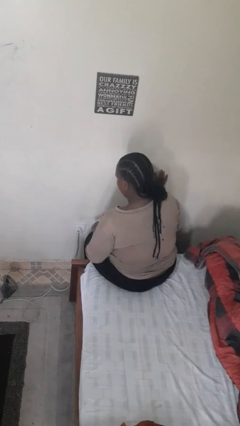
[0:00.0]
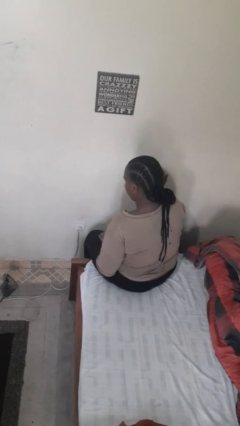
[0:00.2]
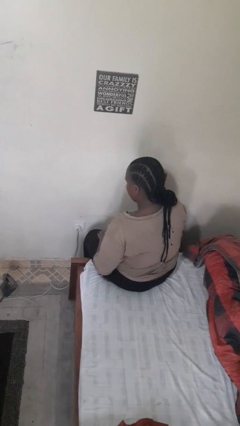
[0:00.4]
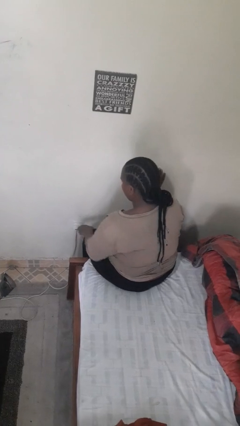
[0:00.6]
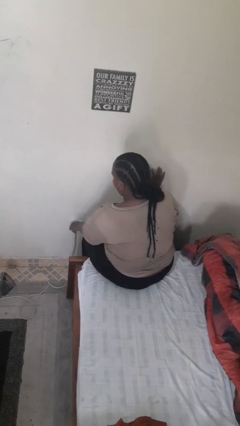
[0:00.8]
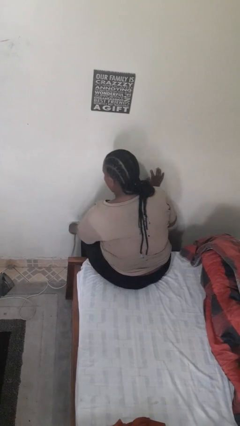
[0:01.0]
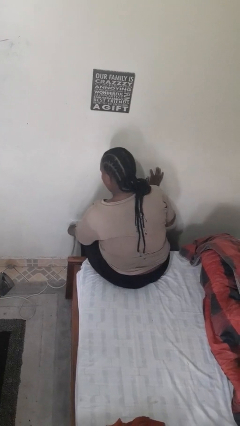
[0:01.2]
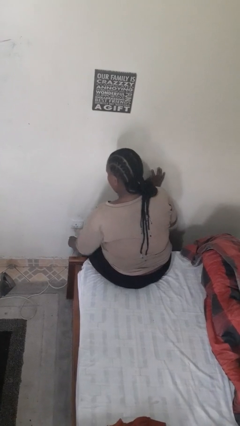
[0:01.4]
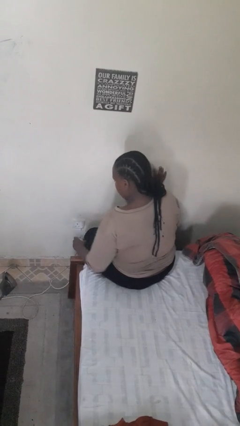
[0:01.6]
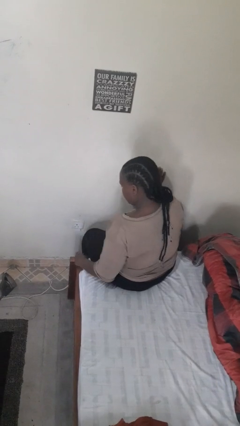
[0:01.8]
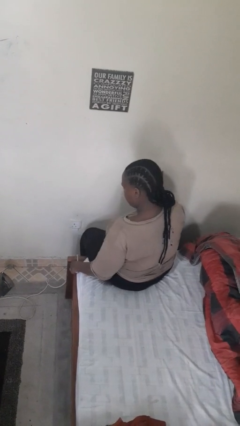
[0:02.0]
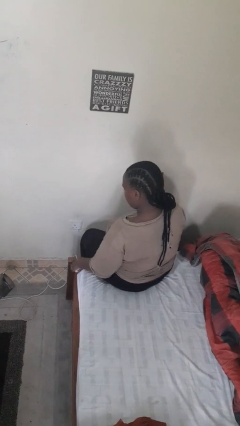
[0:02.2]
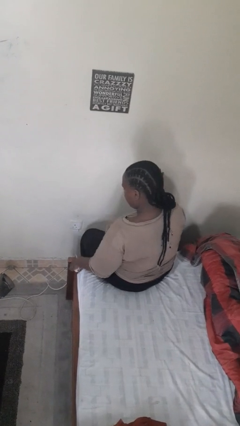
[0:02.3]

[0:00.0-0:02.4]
person unplugs from electrical socket

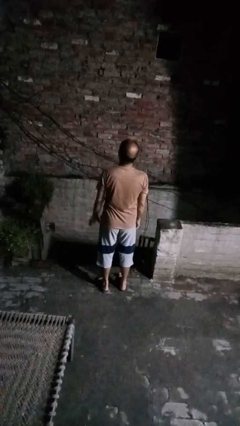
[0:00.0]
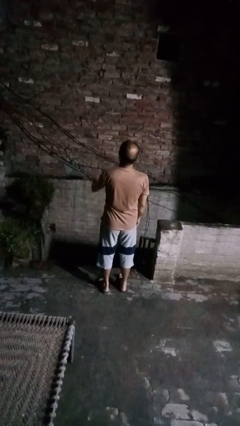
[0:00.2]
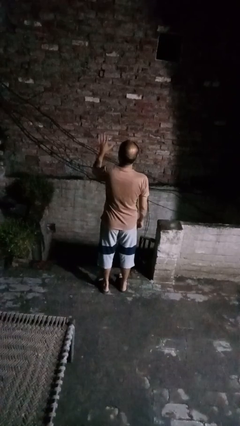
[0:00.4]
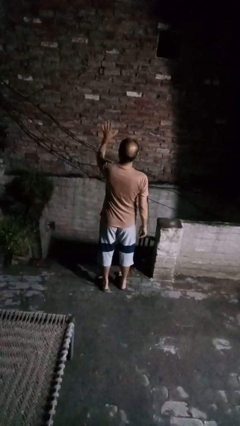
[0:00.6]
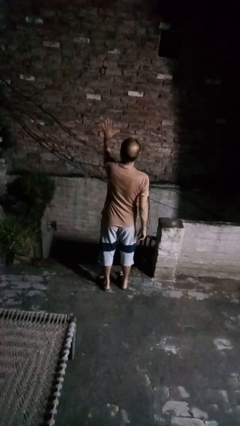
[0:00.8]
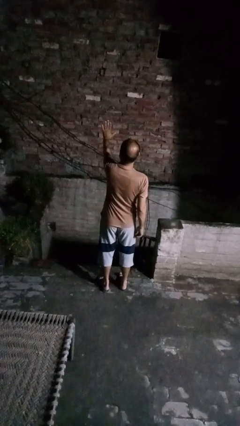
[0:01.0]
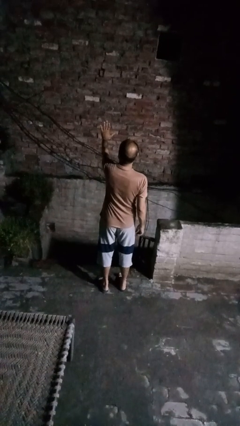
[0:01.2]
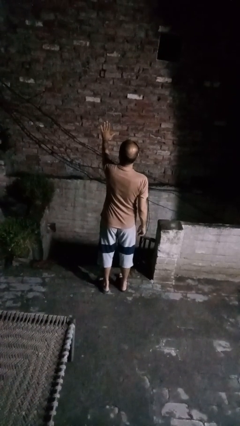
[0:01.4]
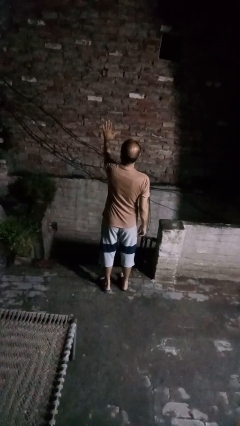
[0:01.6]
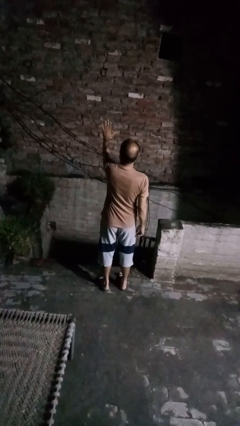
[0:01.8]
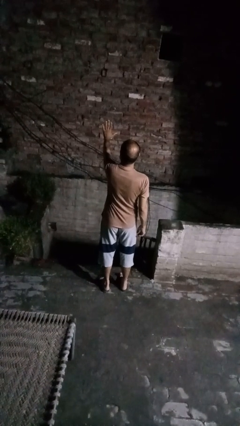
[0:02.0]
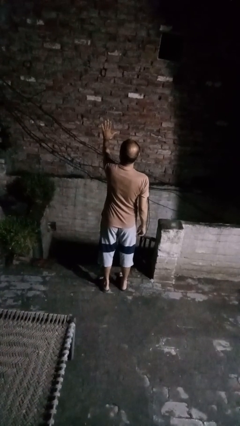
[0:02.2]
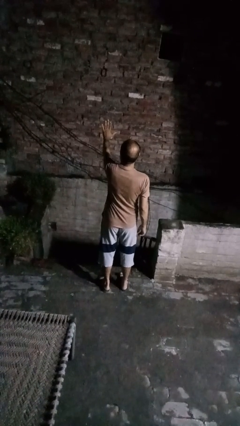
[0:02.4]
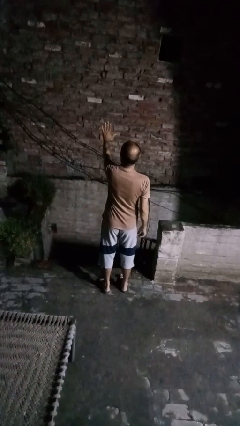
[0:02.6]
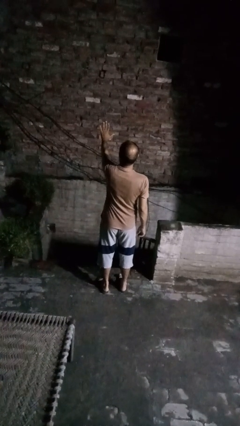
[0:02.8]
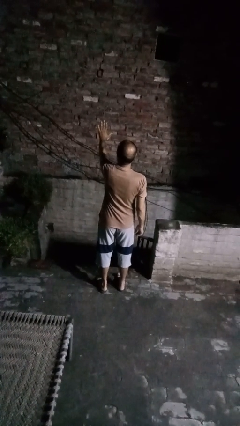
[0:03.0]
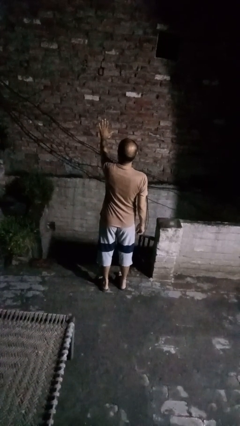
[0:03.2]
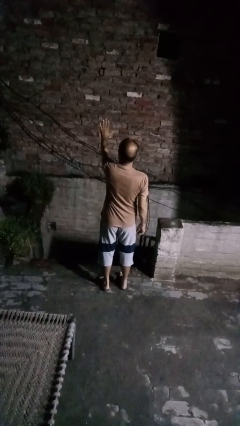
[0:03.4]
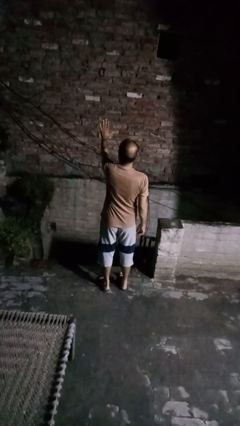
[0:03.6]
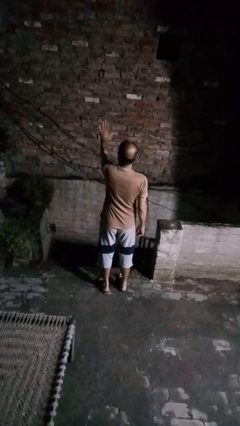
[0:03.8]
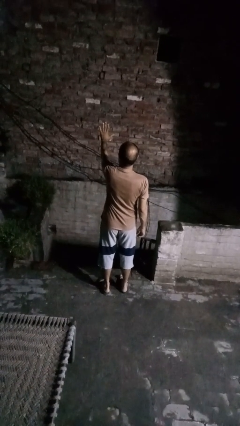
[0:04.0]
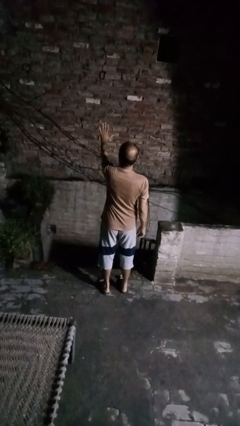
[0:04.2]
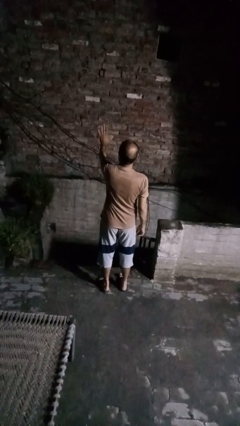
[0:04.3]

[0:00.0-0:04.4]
person gestures stop

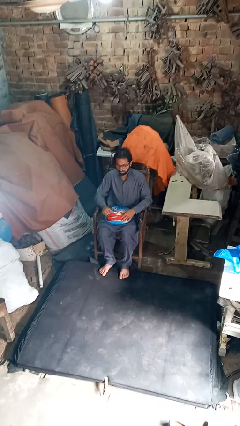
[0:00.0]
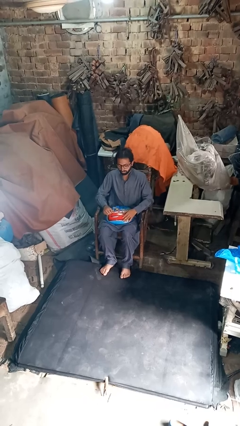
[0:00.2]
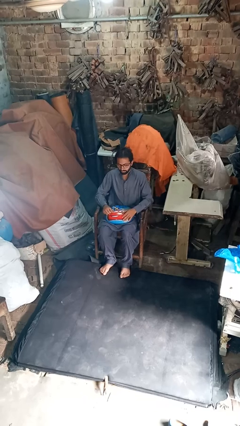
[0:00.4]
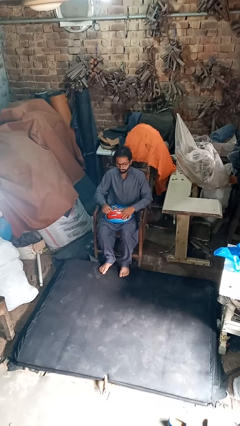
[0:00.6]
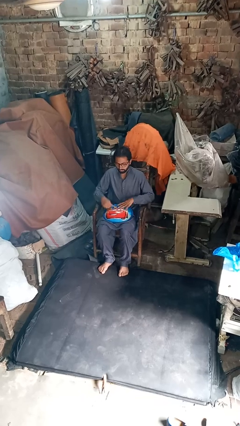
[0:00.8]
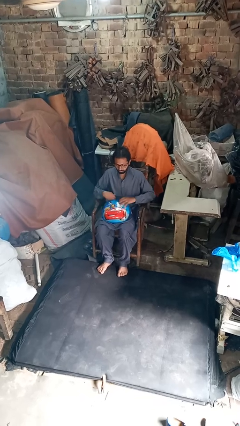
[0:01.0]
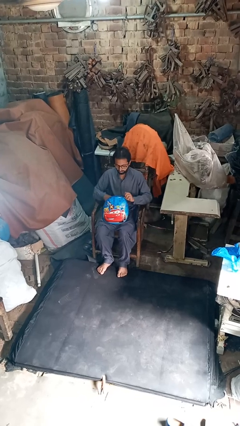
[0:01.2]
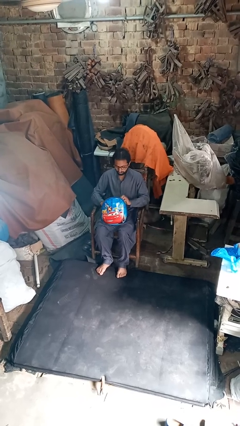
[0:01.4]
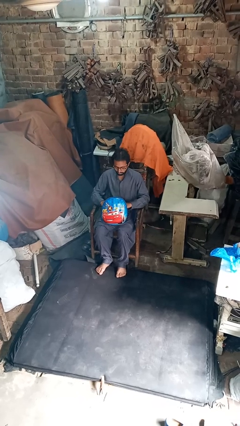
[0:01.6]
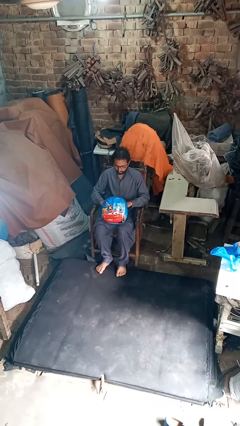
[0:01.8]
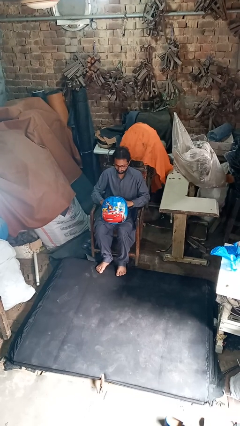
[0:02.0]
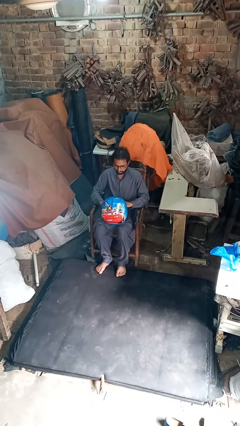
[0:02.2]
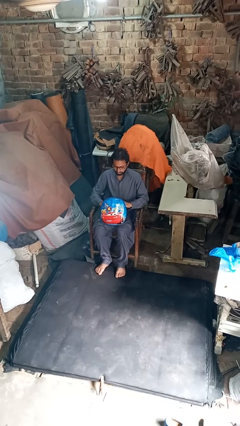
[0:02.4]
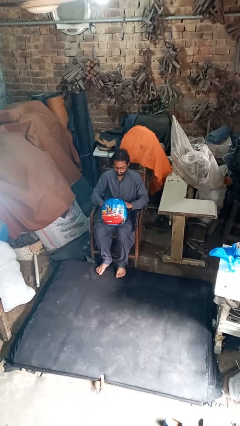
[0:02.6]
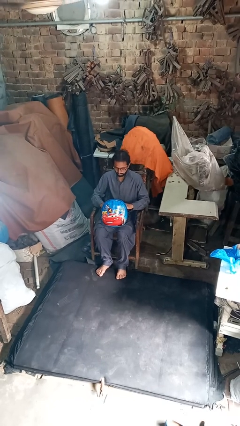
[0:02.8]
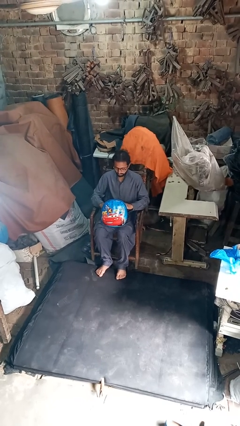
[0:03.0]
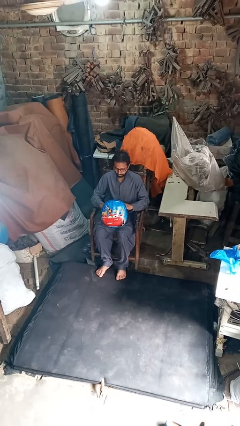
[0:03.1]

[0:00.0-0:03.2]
person searches in purse

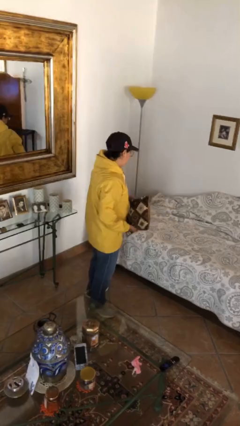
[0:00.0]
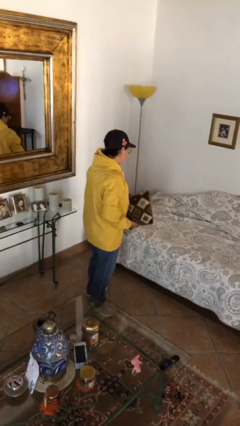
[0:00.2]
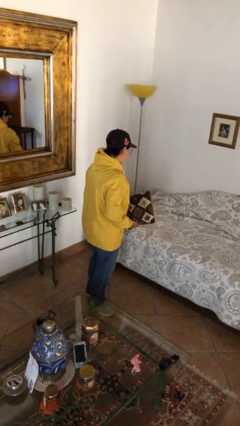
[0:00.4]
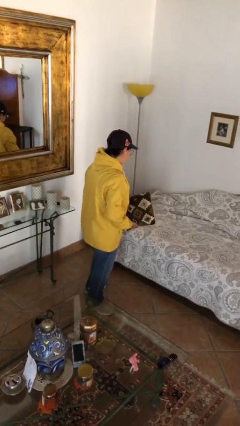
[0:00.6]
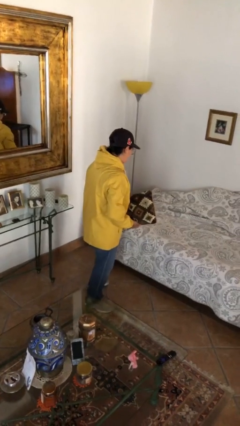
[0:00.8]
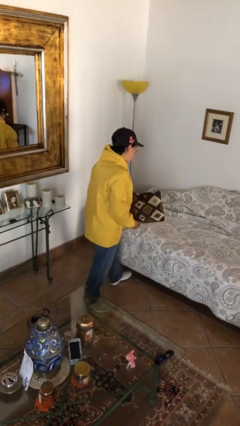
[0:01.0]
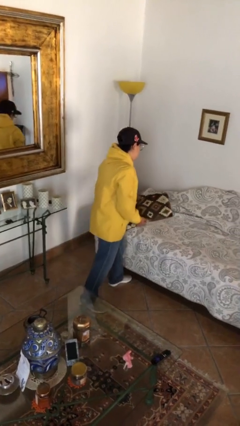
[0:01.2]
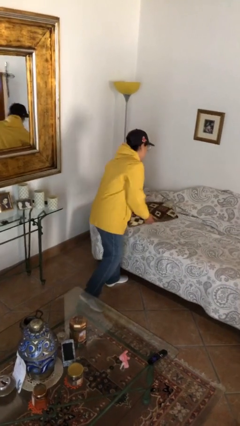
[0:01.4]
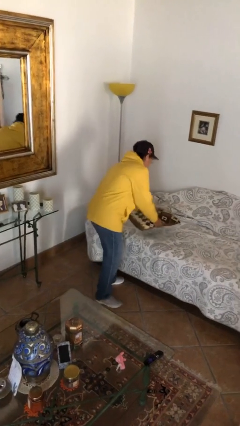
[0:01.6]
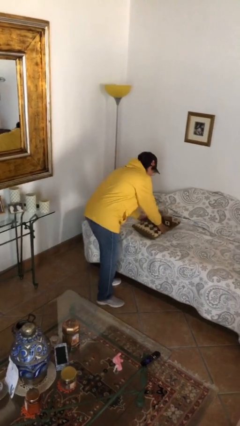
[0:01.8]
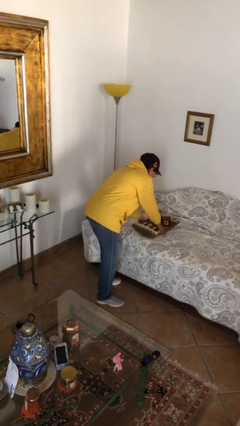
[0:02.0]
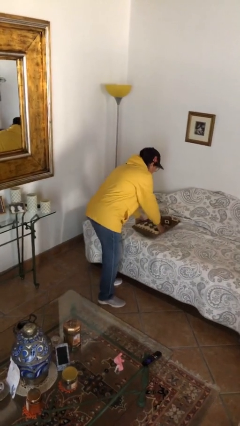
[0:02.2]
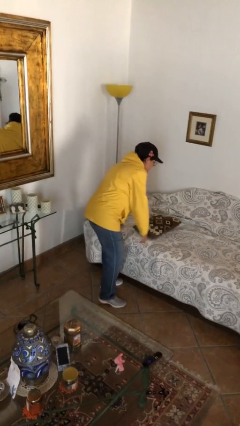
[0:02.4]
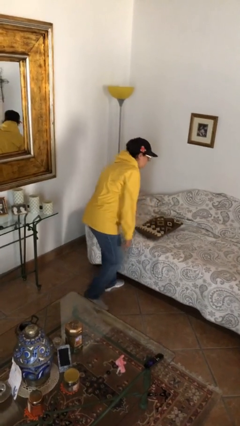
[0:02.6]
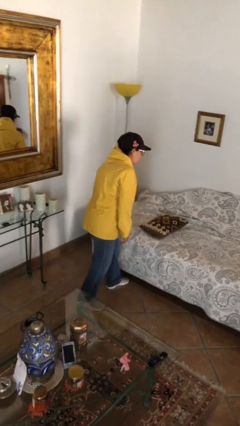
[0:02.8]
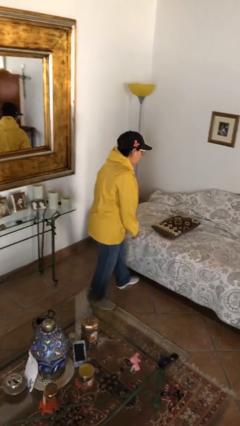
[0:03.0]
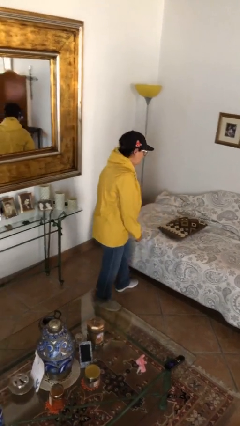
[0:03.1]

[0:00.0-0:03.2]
person puts down object on bed

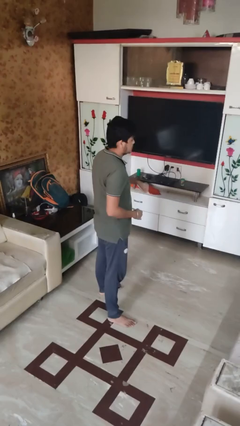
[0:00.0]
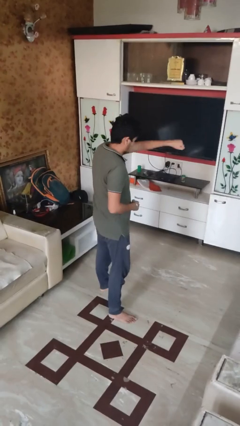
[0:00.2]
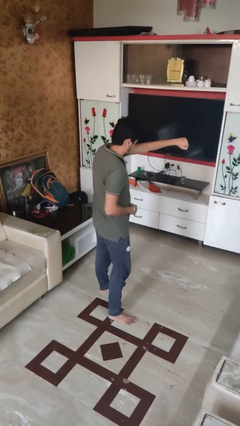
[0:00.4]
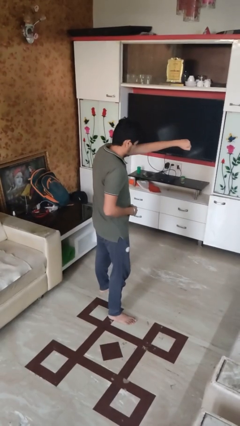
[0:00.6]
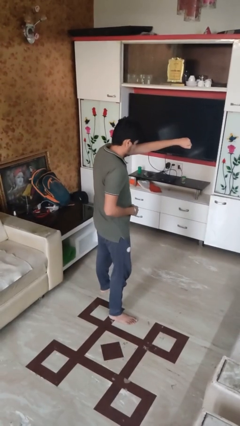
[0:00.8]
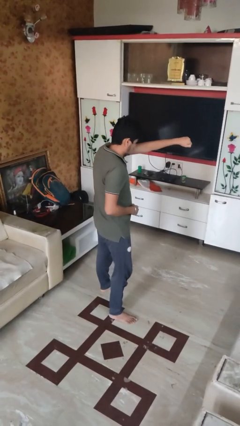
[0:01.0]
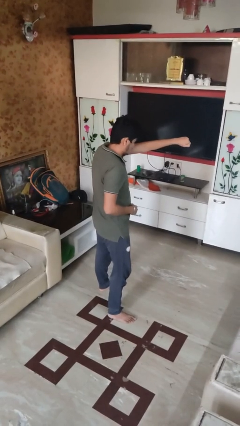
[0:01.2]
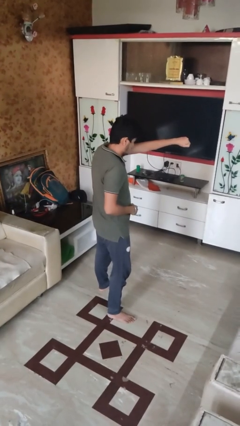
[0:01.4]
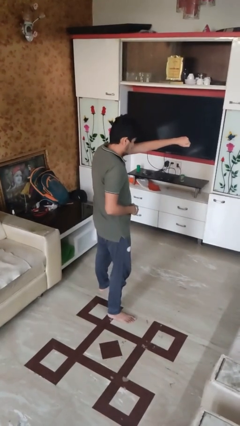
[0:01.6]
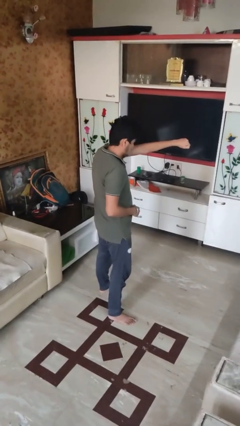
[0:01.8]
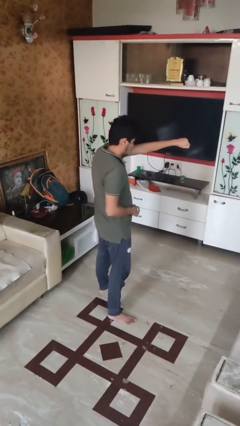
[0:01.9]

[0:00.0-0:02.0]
person punches

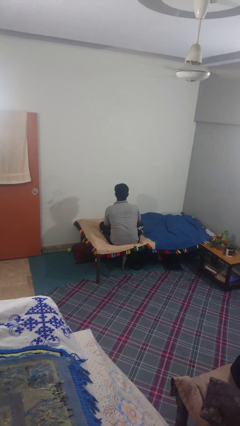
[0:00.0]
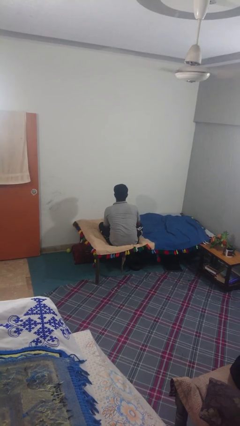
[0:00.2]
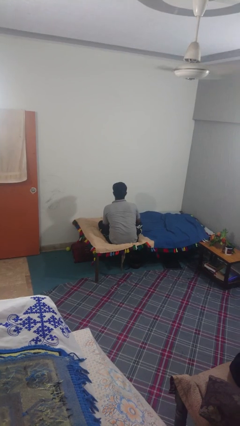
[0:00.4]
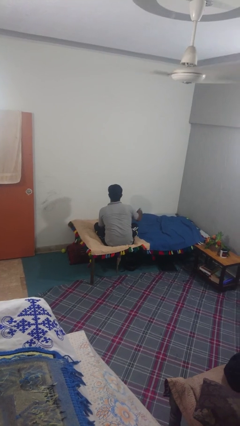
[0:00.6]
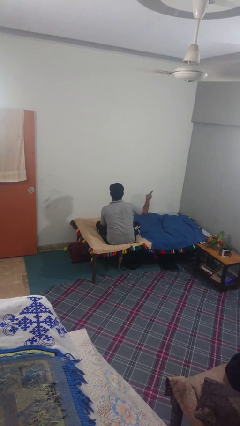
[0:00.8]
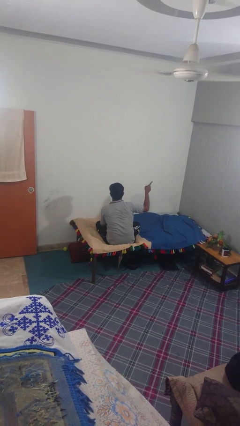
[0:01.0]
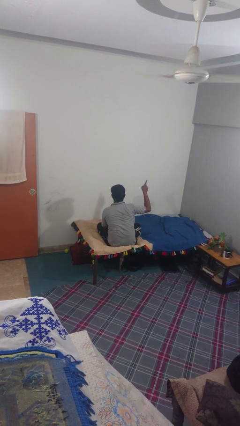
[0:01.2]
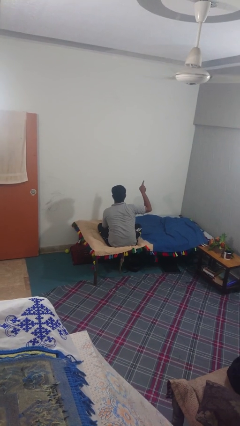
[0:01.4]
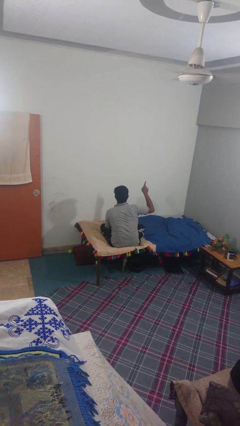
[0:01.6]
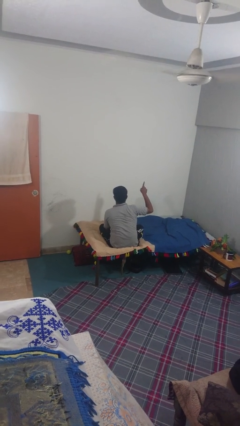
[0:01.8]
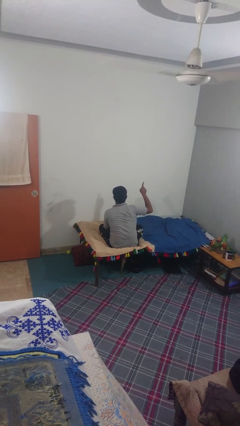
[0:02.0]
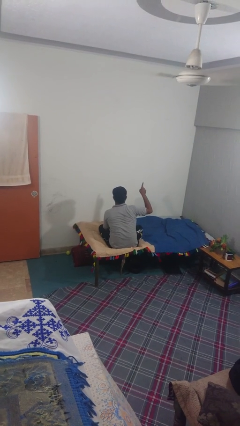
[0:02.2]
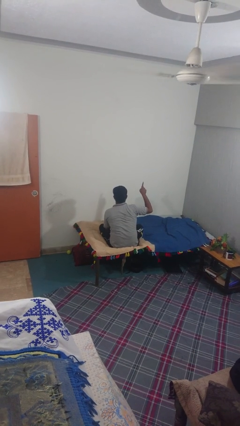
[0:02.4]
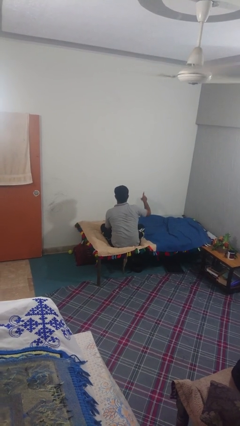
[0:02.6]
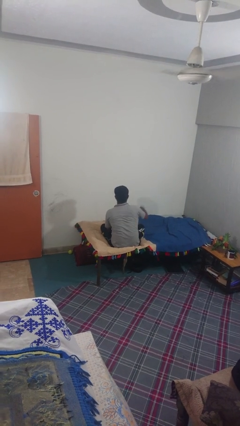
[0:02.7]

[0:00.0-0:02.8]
person gestures number one
